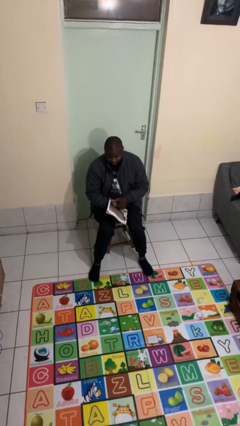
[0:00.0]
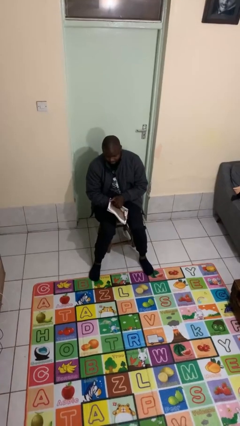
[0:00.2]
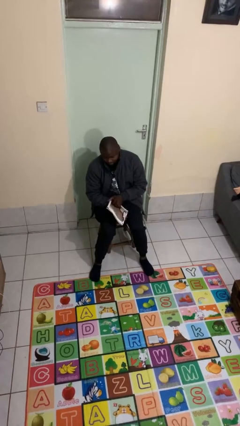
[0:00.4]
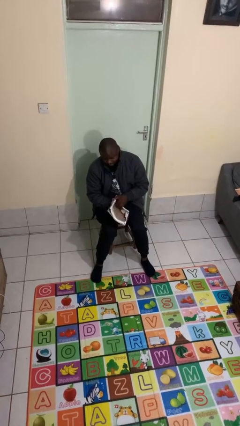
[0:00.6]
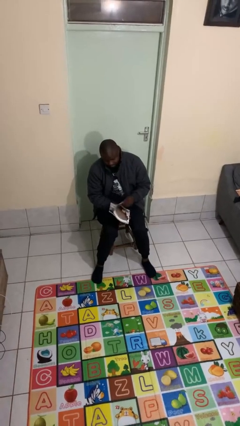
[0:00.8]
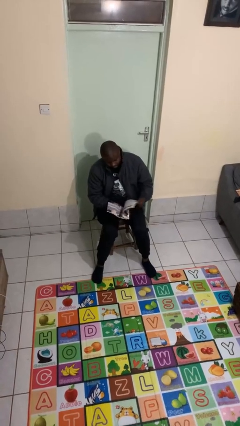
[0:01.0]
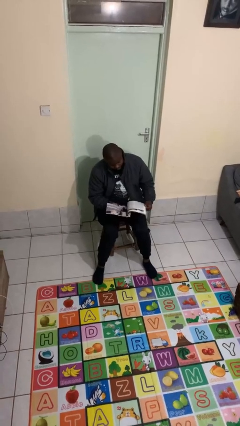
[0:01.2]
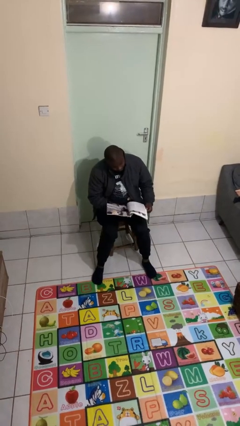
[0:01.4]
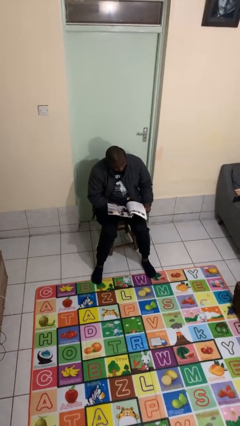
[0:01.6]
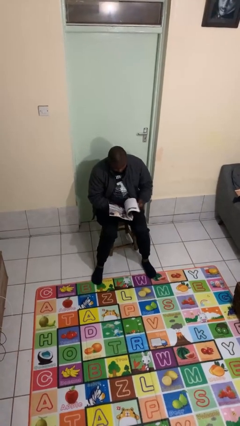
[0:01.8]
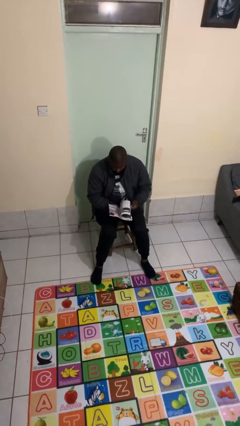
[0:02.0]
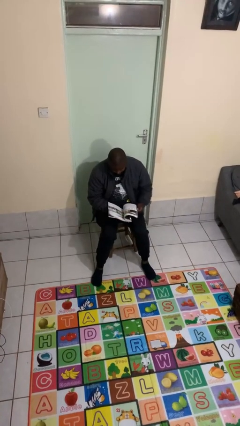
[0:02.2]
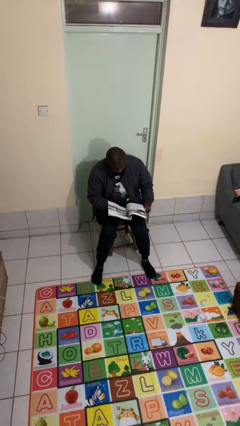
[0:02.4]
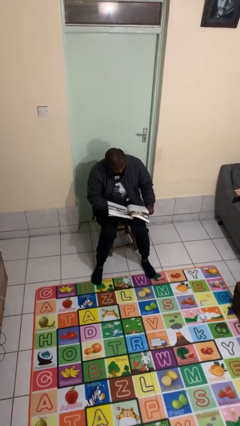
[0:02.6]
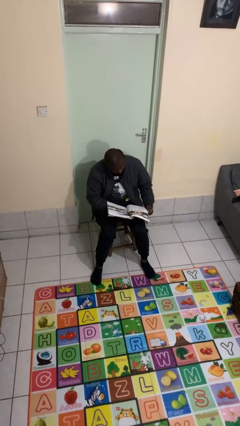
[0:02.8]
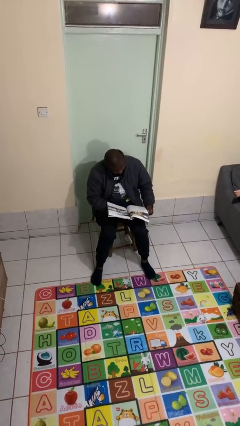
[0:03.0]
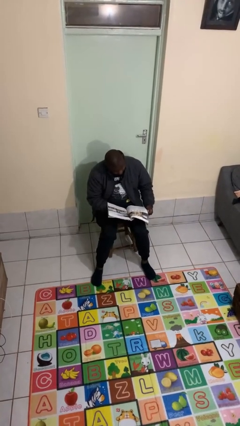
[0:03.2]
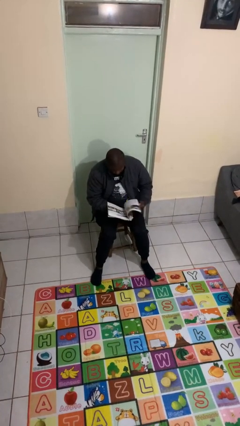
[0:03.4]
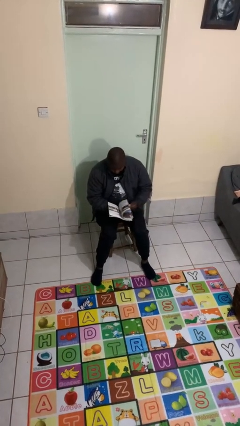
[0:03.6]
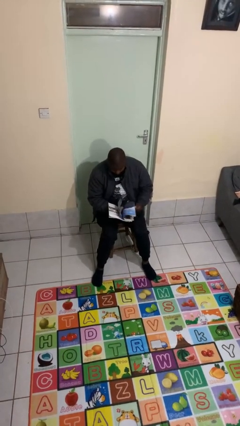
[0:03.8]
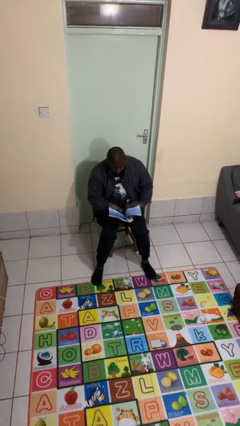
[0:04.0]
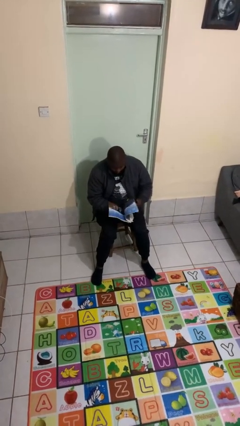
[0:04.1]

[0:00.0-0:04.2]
person reads magazine

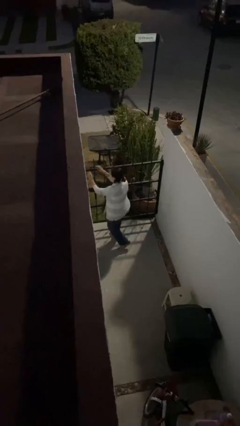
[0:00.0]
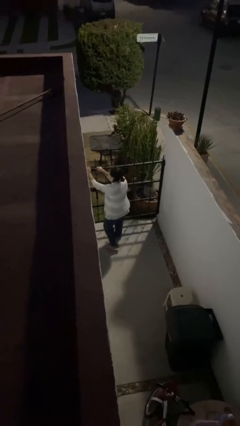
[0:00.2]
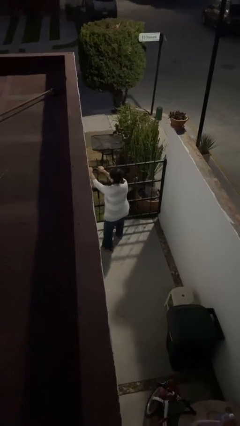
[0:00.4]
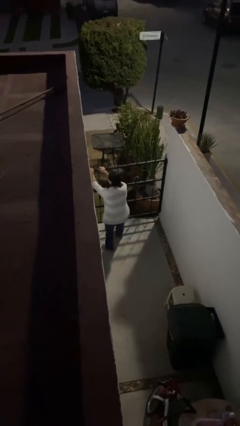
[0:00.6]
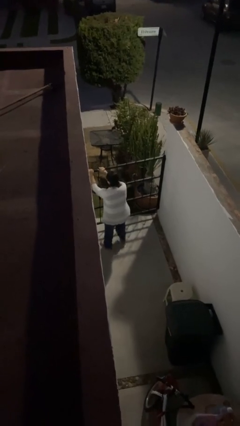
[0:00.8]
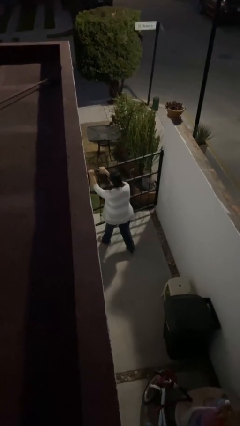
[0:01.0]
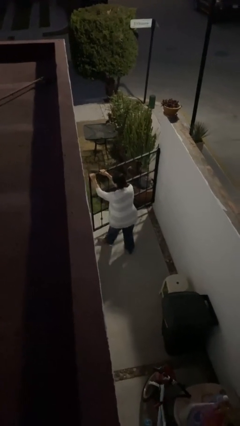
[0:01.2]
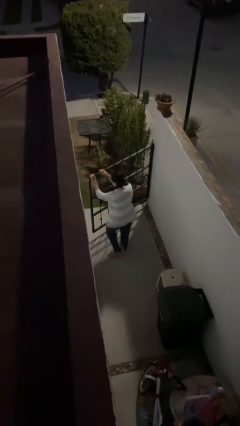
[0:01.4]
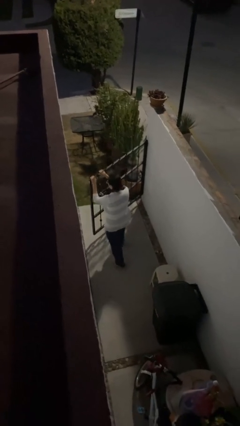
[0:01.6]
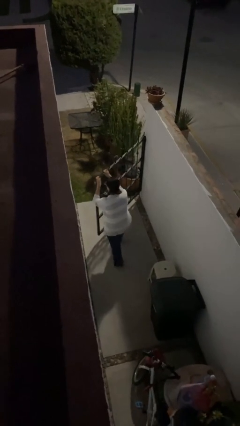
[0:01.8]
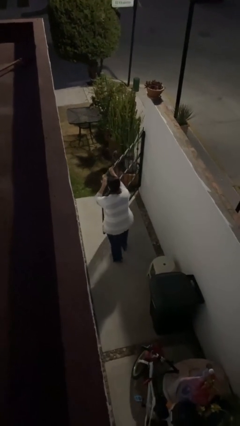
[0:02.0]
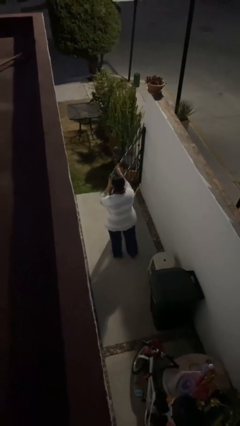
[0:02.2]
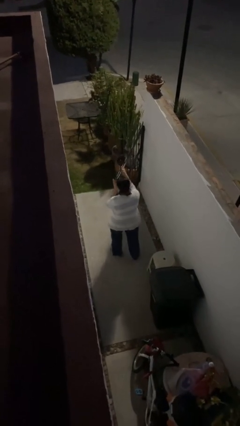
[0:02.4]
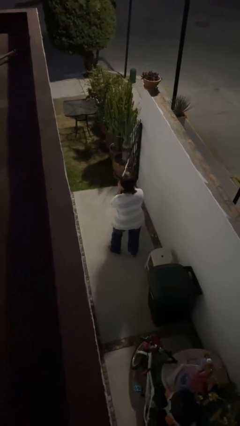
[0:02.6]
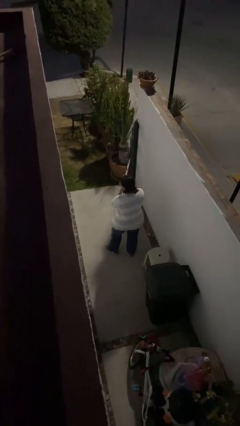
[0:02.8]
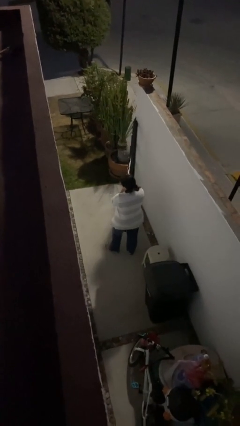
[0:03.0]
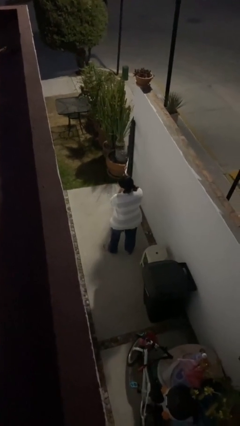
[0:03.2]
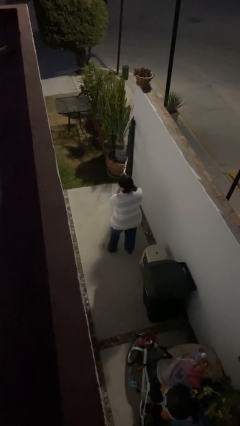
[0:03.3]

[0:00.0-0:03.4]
person opens facility door

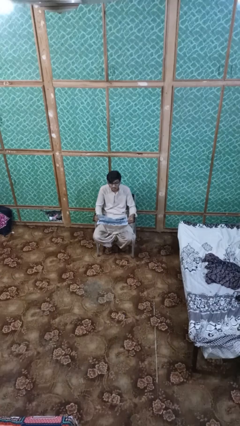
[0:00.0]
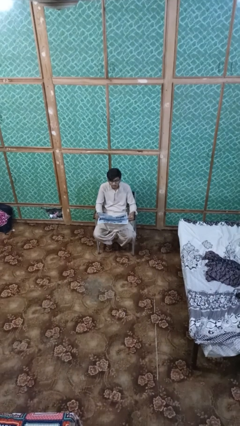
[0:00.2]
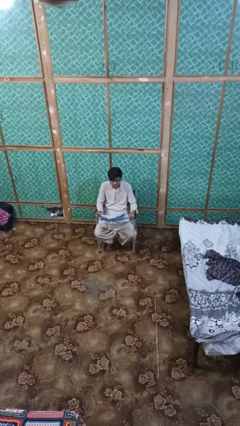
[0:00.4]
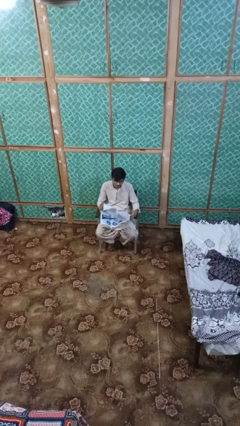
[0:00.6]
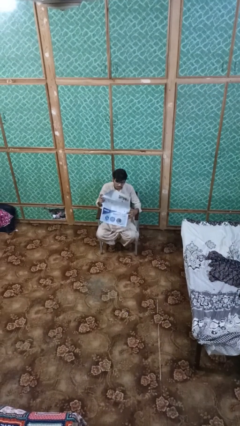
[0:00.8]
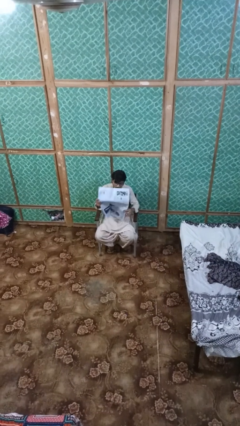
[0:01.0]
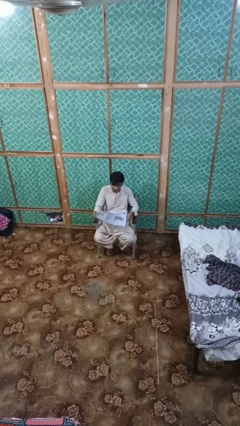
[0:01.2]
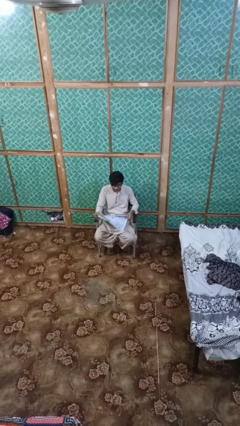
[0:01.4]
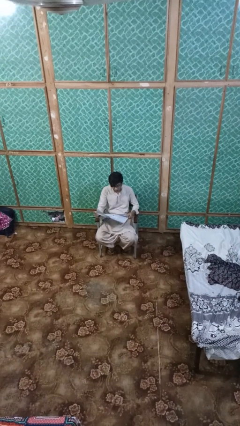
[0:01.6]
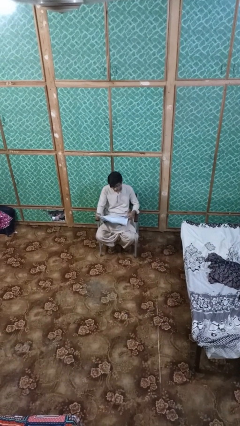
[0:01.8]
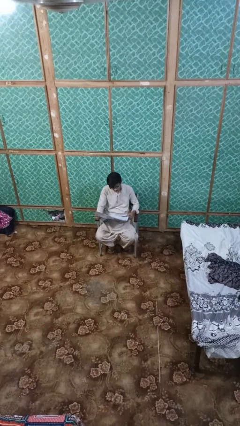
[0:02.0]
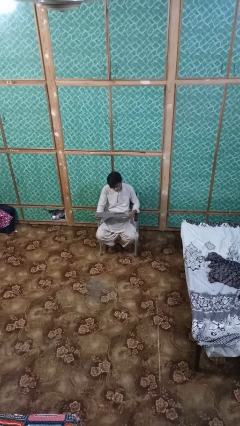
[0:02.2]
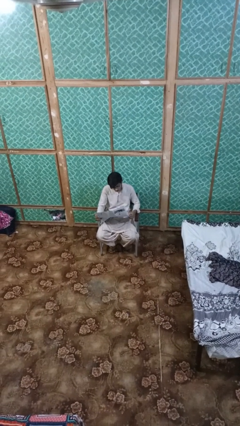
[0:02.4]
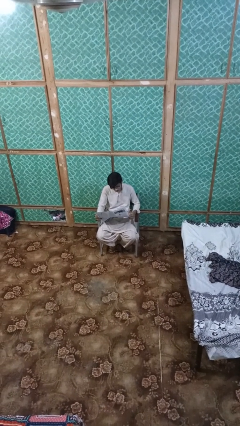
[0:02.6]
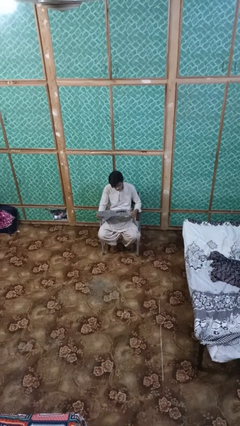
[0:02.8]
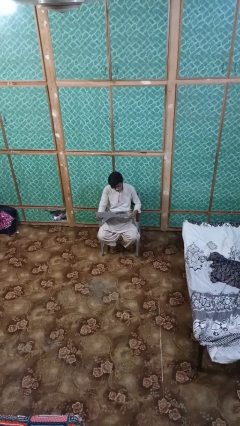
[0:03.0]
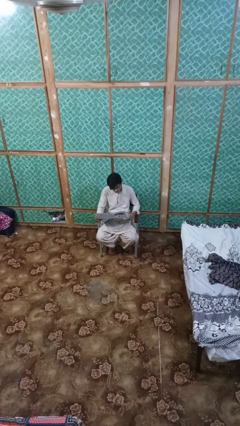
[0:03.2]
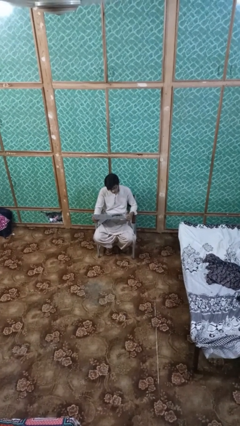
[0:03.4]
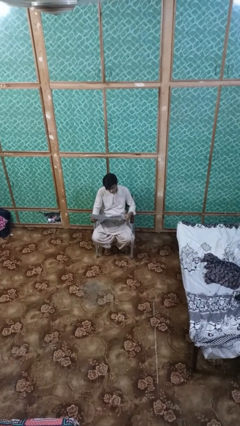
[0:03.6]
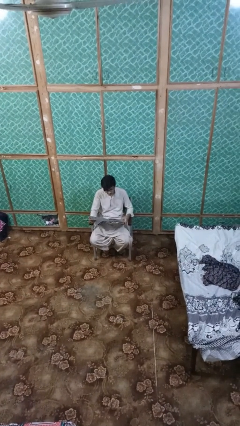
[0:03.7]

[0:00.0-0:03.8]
person reads newspaper

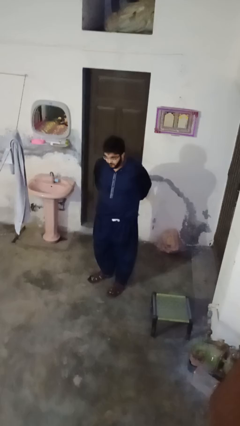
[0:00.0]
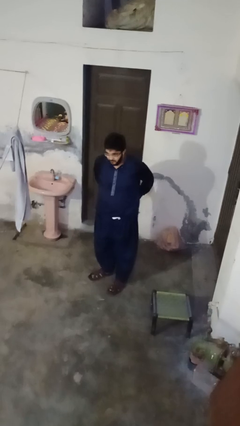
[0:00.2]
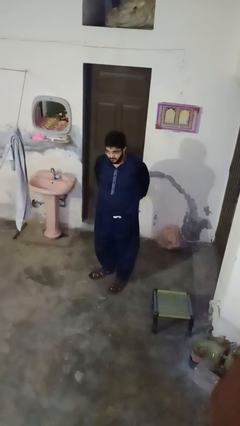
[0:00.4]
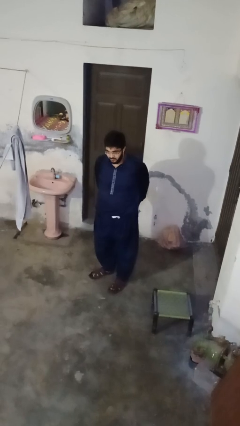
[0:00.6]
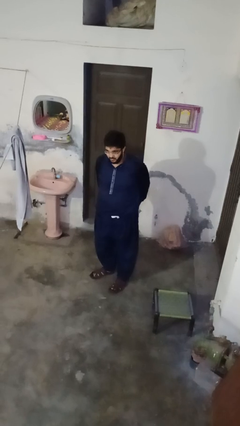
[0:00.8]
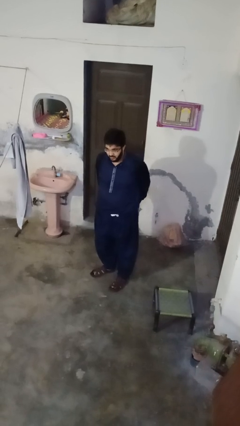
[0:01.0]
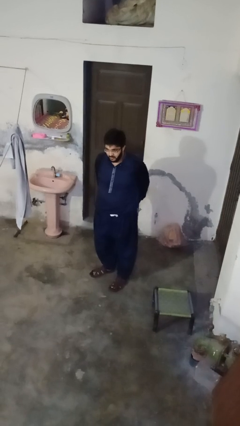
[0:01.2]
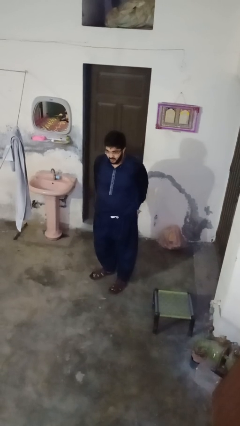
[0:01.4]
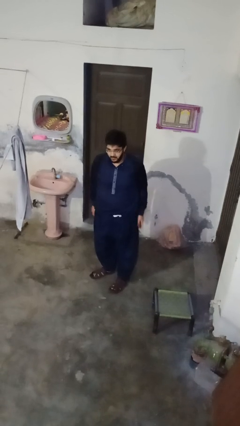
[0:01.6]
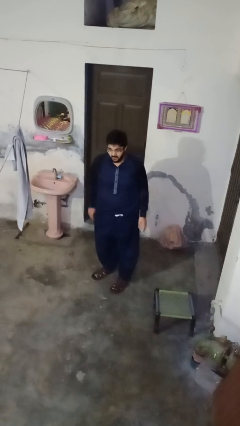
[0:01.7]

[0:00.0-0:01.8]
person puts hands in back pockets

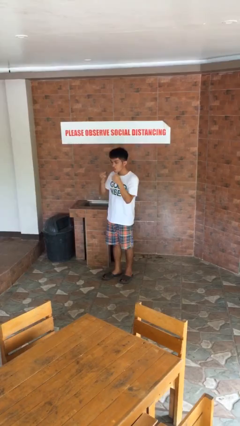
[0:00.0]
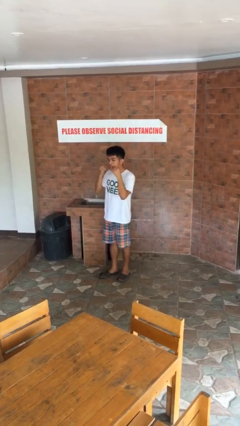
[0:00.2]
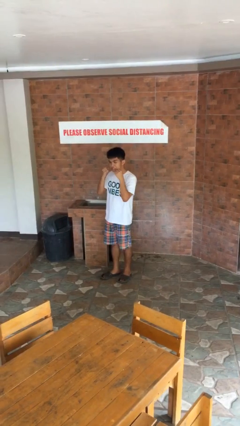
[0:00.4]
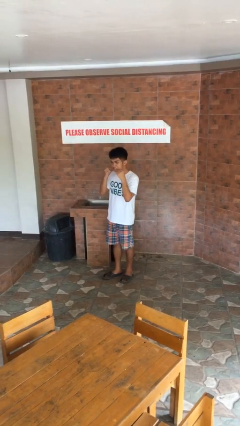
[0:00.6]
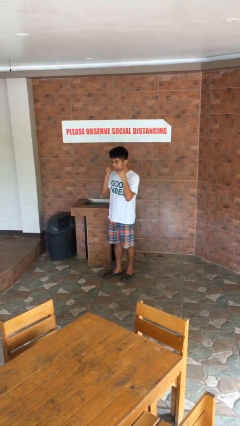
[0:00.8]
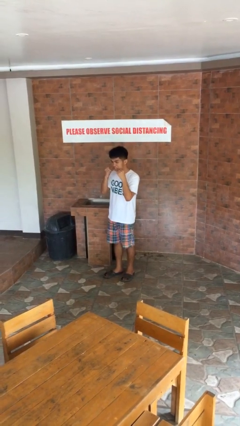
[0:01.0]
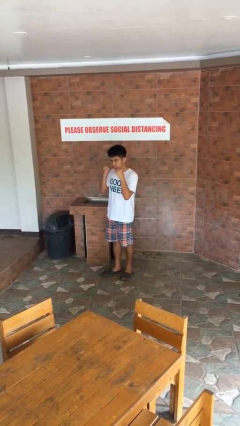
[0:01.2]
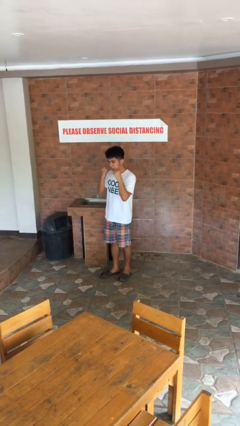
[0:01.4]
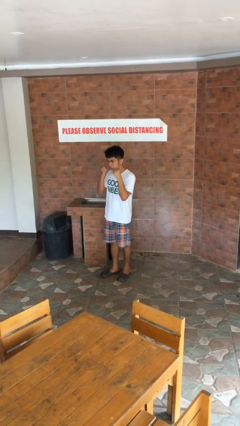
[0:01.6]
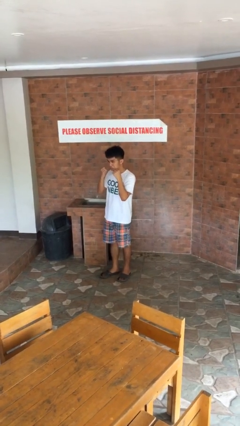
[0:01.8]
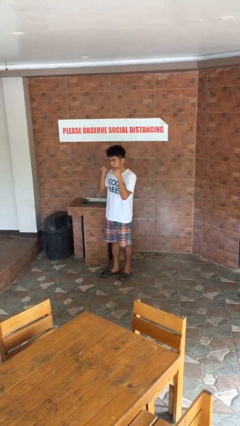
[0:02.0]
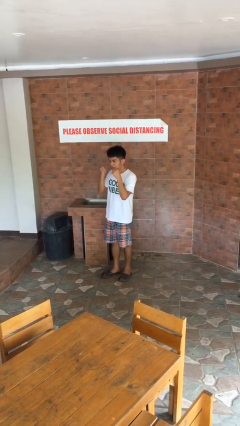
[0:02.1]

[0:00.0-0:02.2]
person flosses

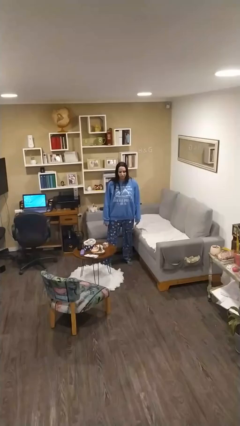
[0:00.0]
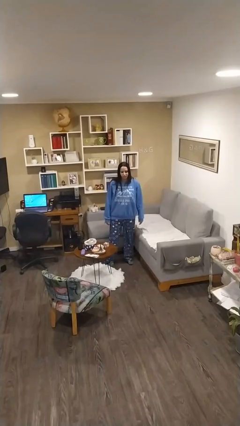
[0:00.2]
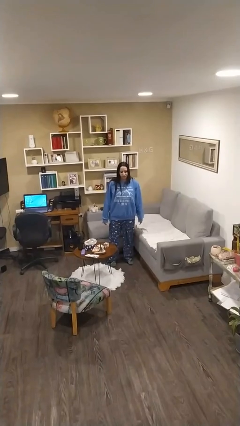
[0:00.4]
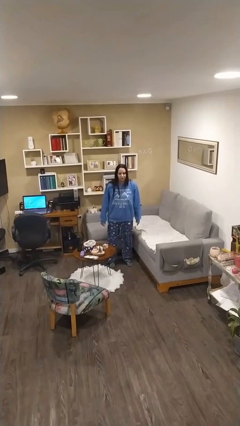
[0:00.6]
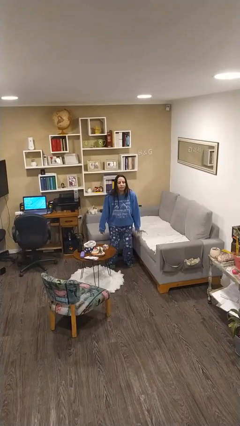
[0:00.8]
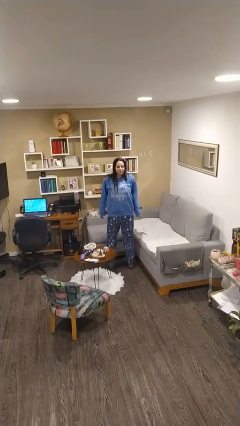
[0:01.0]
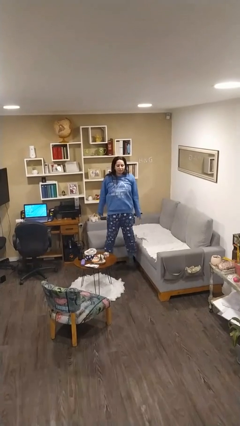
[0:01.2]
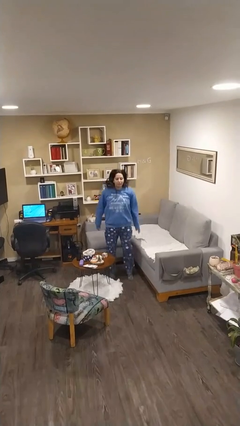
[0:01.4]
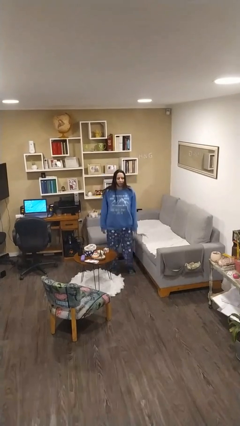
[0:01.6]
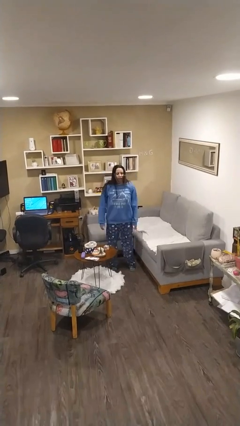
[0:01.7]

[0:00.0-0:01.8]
person jumps

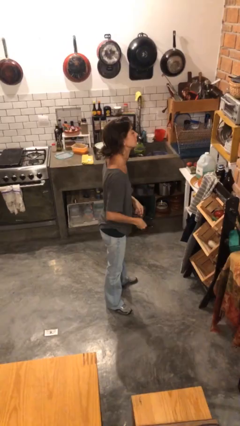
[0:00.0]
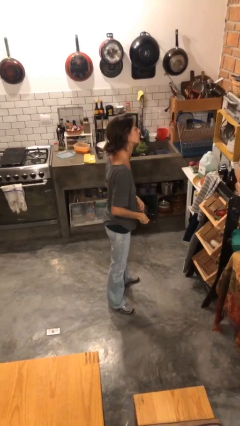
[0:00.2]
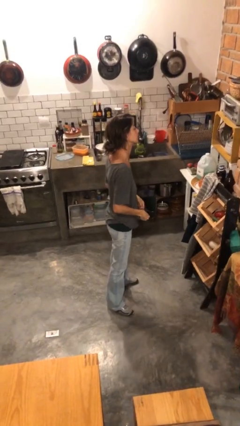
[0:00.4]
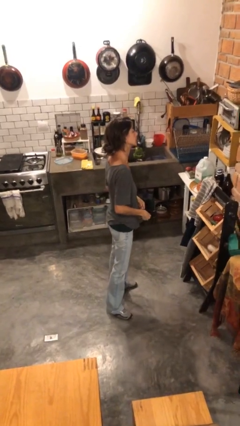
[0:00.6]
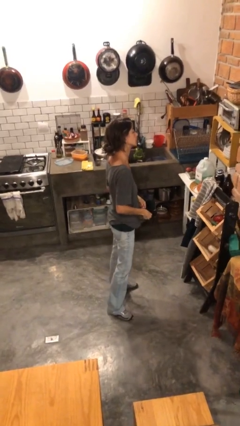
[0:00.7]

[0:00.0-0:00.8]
person takes off glasses
